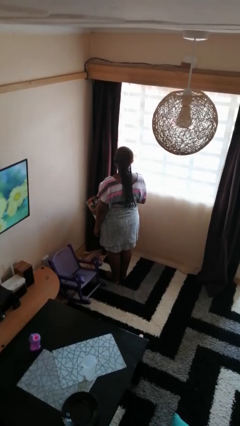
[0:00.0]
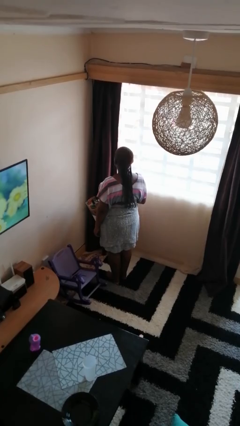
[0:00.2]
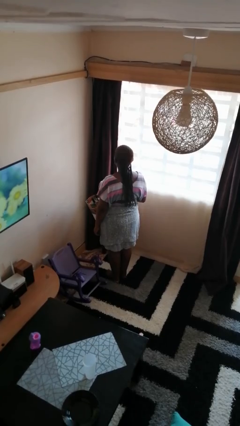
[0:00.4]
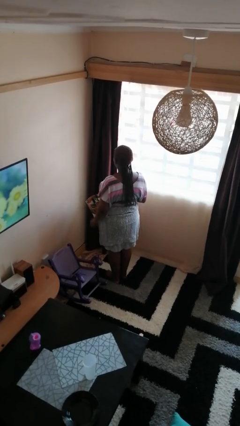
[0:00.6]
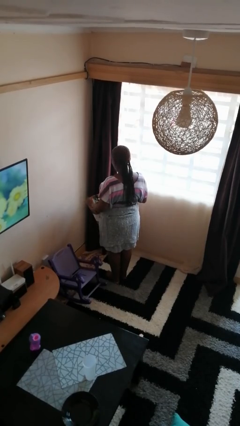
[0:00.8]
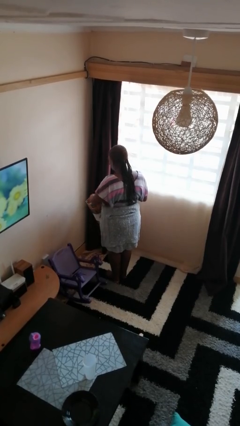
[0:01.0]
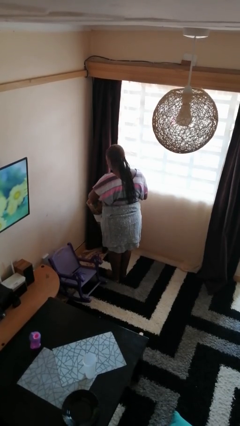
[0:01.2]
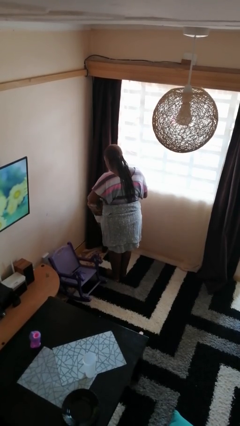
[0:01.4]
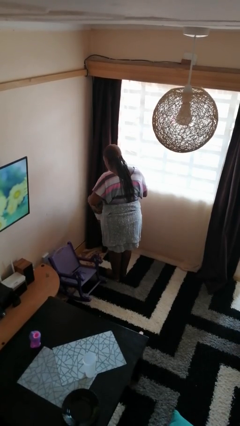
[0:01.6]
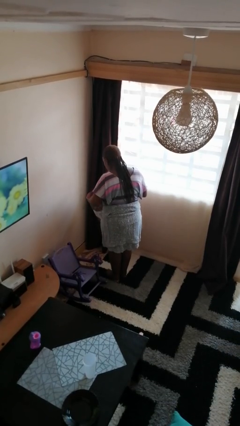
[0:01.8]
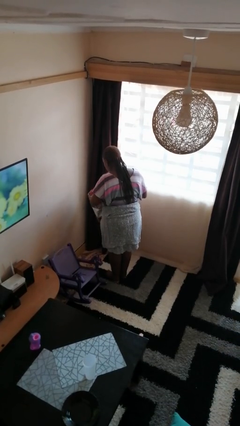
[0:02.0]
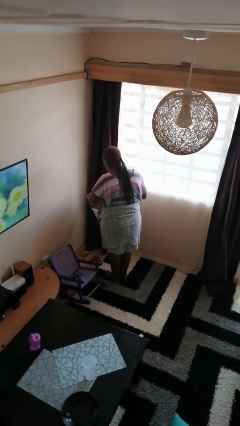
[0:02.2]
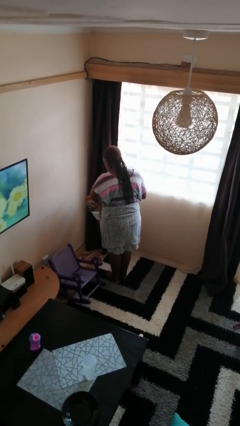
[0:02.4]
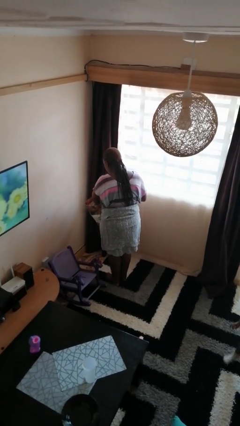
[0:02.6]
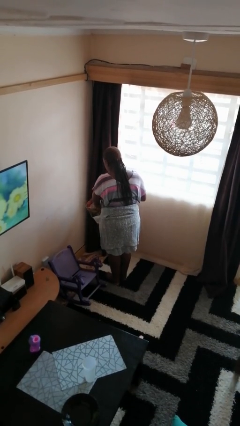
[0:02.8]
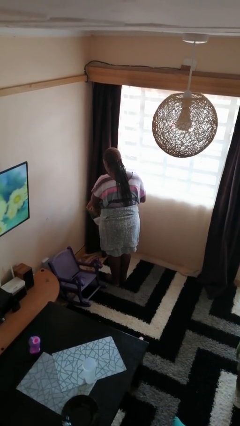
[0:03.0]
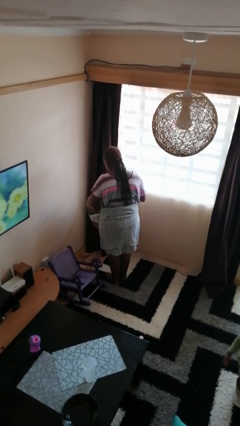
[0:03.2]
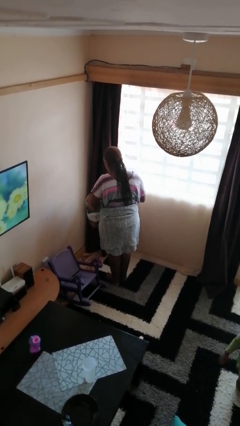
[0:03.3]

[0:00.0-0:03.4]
person takes object from bag

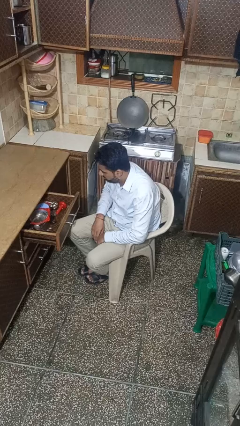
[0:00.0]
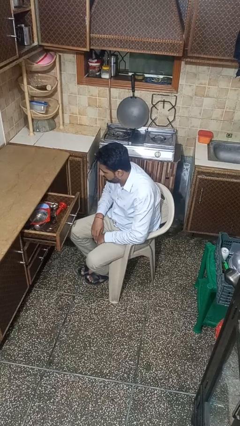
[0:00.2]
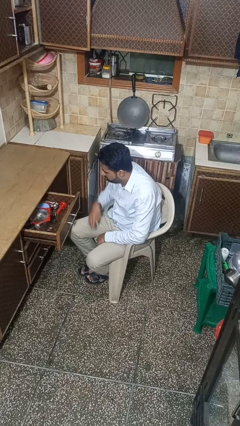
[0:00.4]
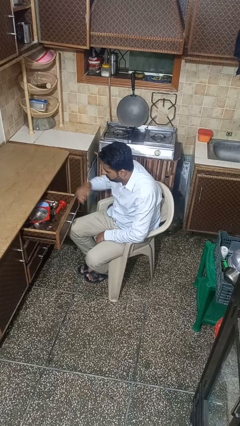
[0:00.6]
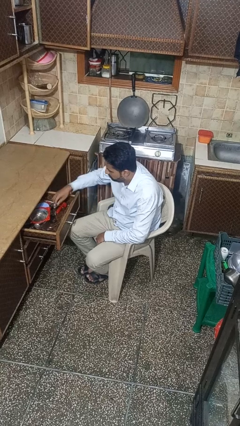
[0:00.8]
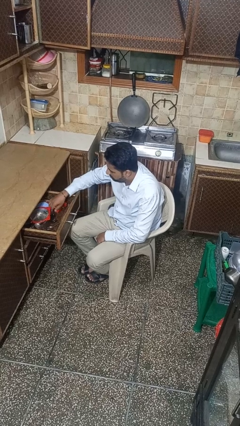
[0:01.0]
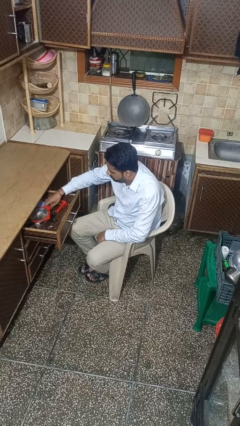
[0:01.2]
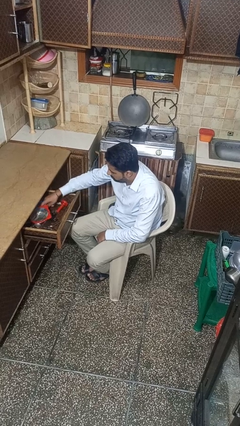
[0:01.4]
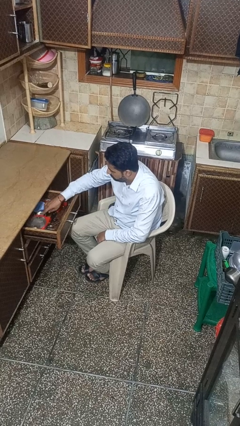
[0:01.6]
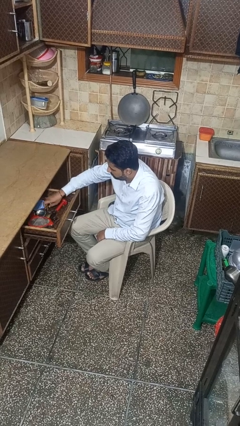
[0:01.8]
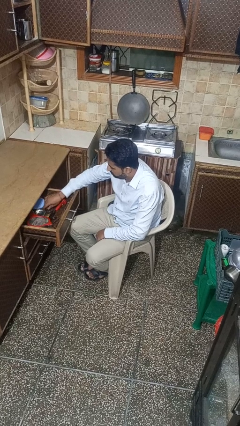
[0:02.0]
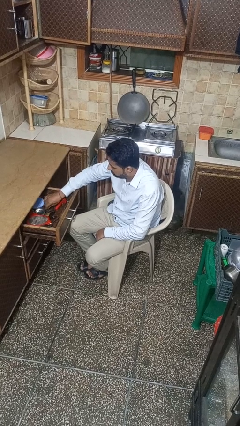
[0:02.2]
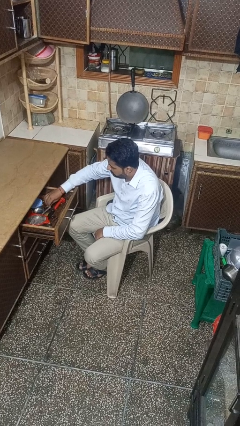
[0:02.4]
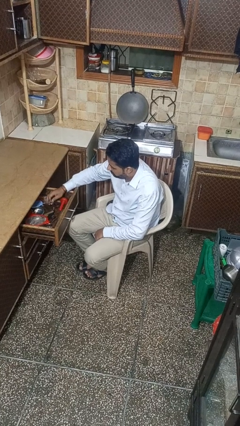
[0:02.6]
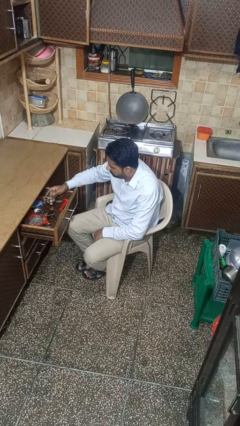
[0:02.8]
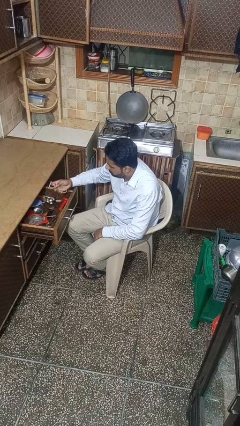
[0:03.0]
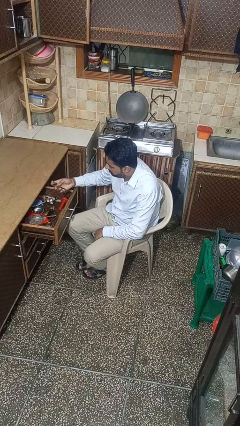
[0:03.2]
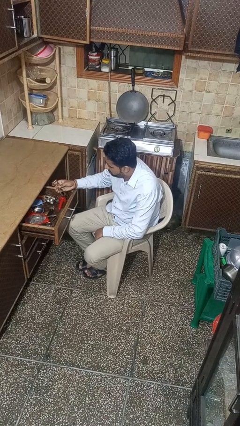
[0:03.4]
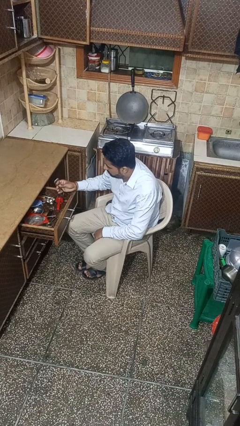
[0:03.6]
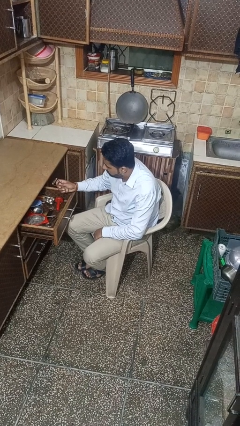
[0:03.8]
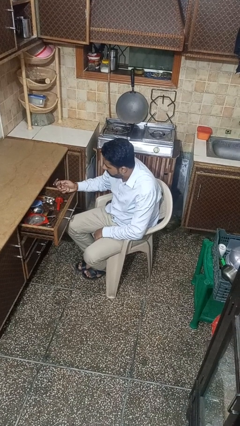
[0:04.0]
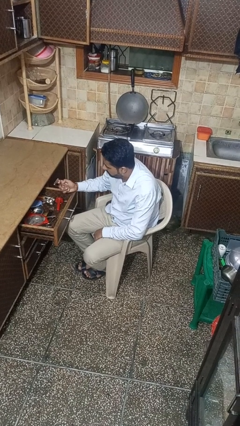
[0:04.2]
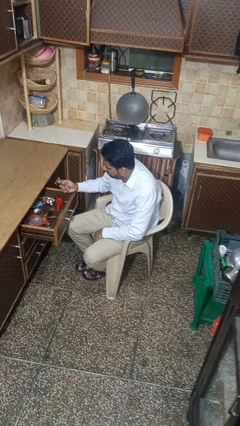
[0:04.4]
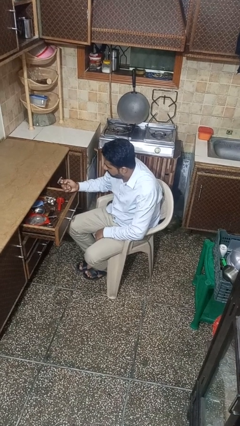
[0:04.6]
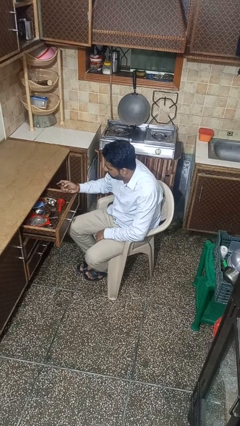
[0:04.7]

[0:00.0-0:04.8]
person takes object from kitchen drawer

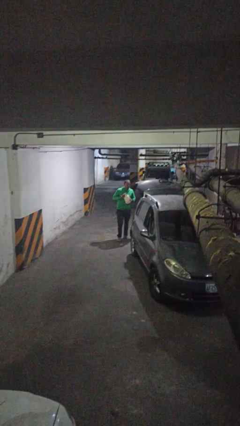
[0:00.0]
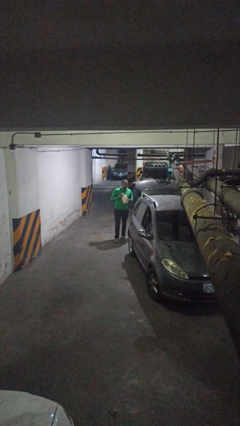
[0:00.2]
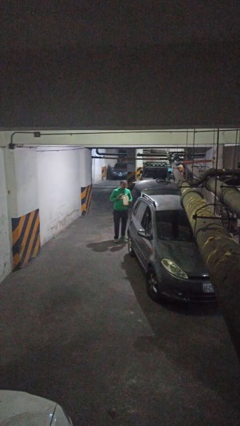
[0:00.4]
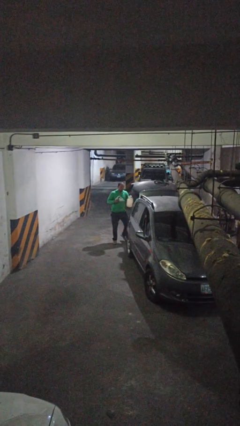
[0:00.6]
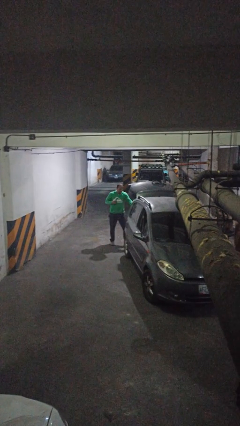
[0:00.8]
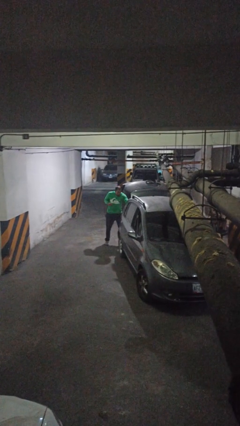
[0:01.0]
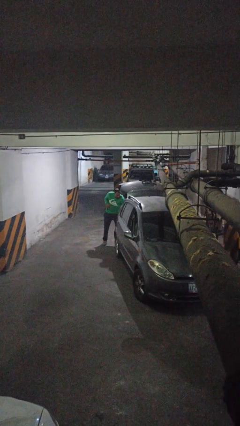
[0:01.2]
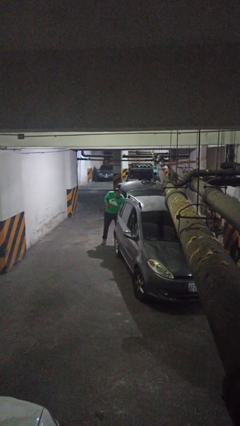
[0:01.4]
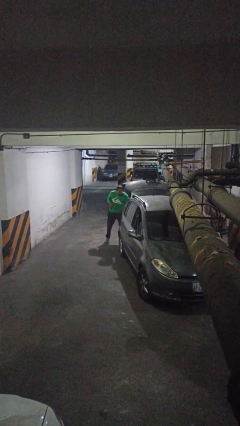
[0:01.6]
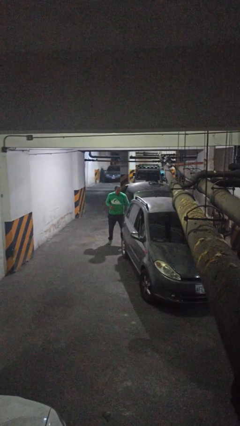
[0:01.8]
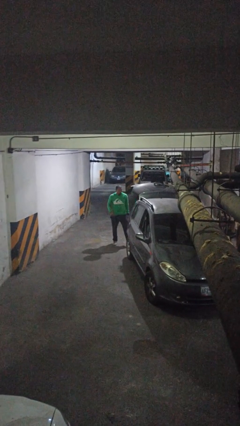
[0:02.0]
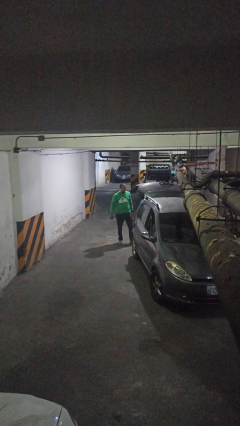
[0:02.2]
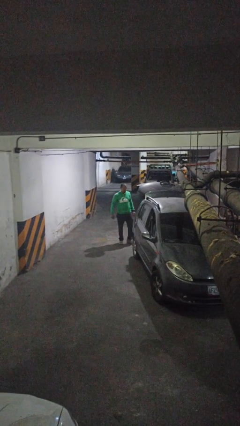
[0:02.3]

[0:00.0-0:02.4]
person loads car

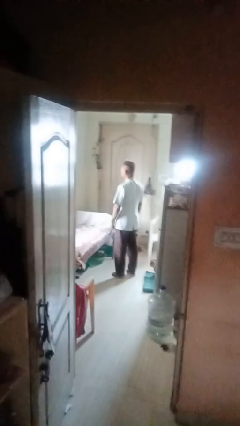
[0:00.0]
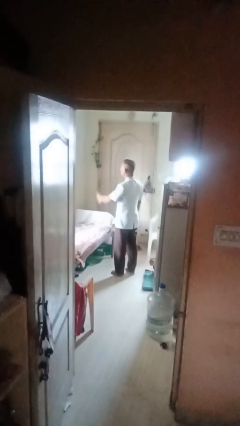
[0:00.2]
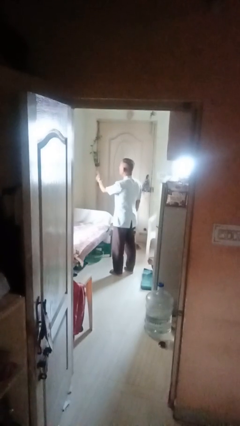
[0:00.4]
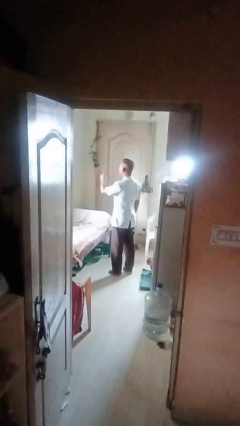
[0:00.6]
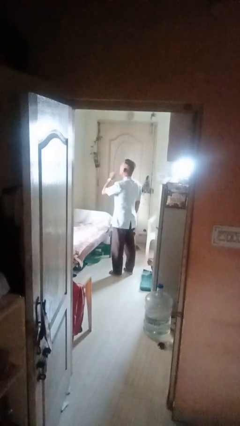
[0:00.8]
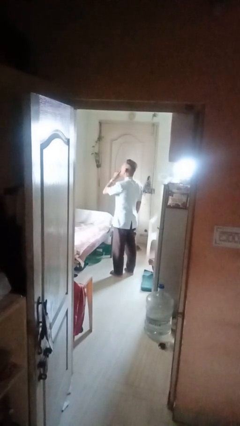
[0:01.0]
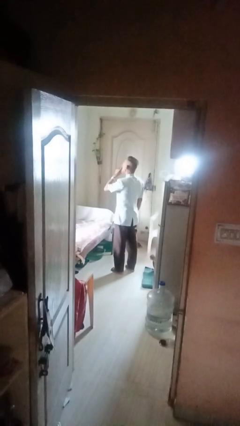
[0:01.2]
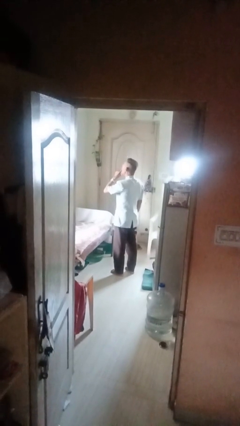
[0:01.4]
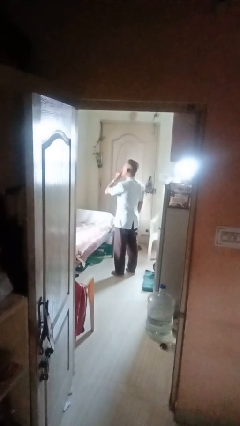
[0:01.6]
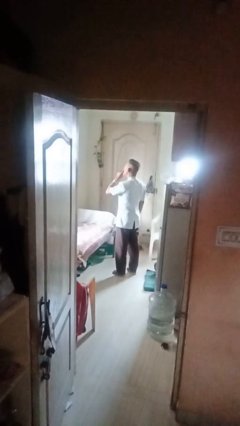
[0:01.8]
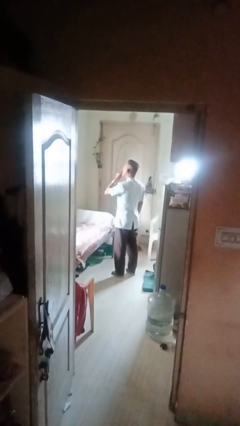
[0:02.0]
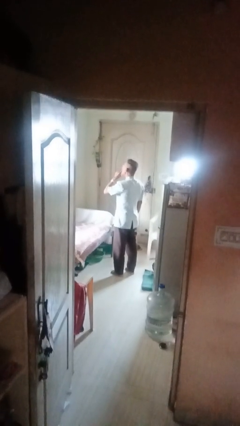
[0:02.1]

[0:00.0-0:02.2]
person gestures be quiet

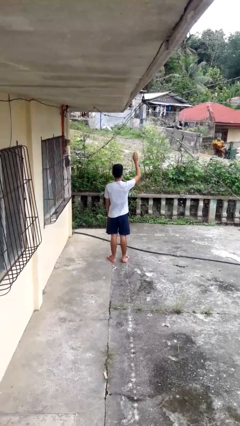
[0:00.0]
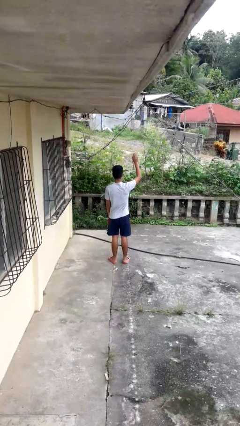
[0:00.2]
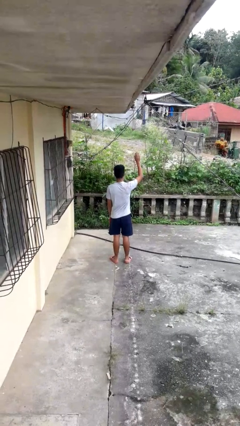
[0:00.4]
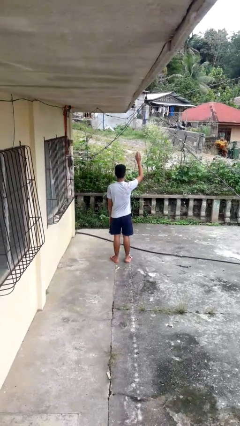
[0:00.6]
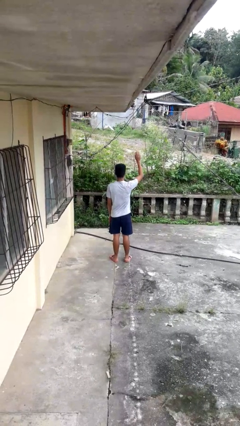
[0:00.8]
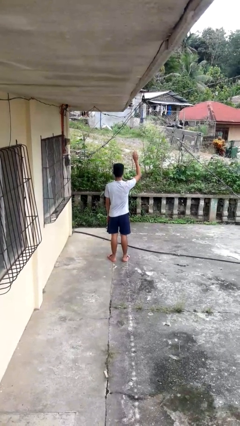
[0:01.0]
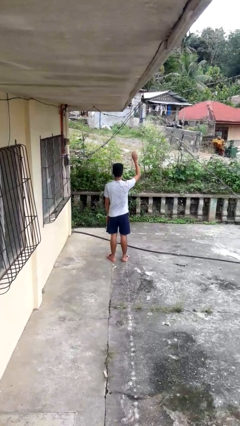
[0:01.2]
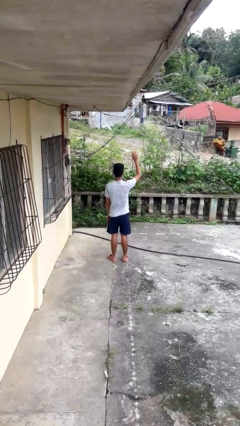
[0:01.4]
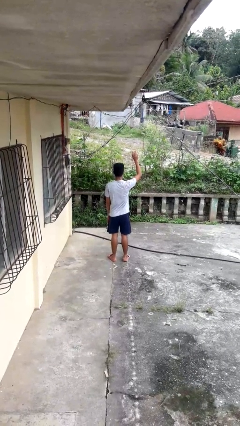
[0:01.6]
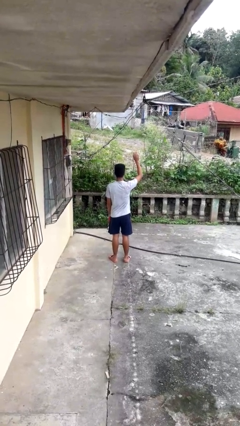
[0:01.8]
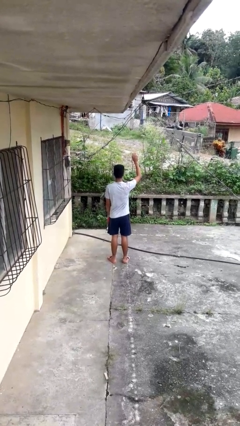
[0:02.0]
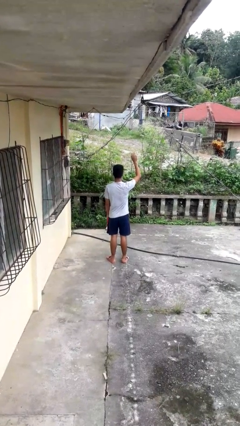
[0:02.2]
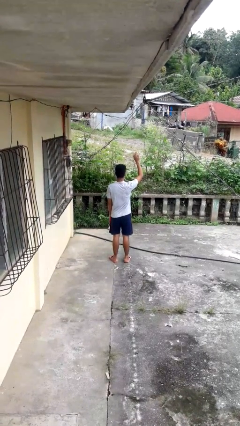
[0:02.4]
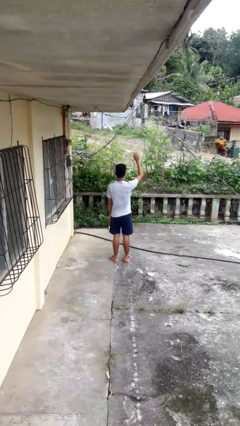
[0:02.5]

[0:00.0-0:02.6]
person gestures raise hand

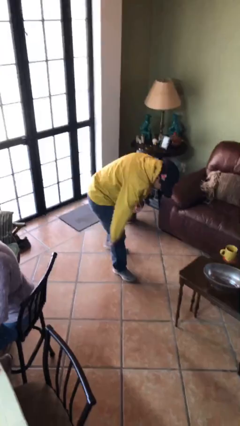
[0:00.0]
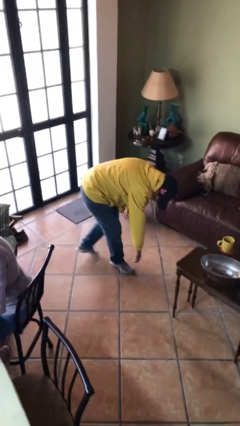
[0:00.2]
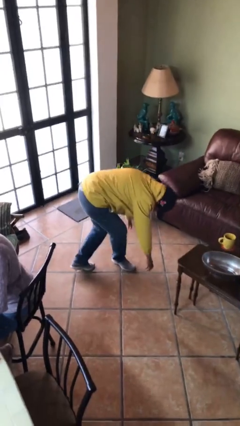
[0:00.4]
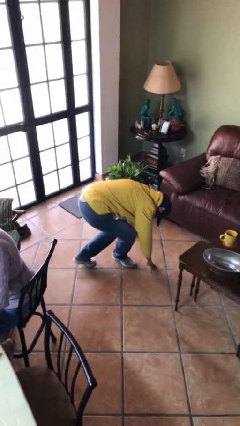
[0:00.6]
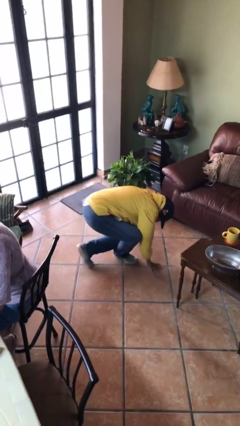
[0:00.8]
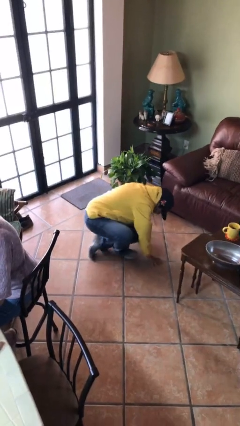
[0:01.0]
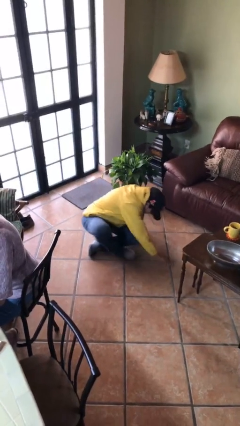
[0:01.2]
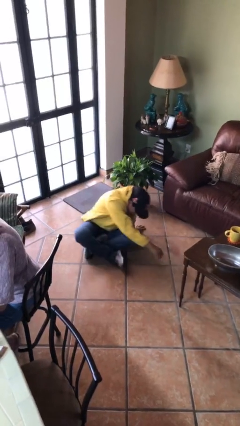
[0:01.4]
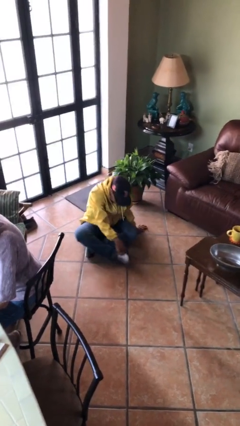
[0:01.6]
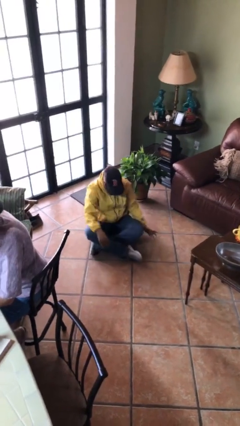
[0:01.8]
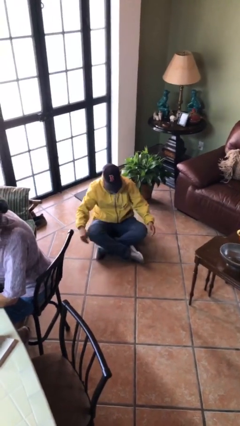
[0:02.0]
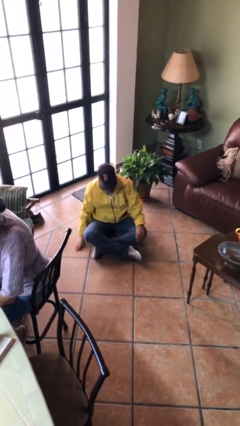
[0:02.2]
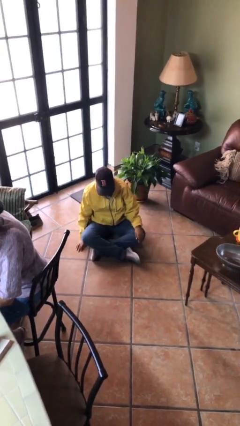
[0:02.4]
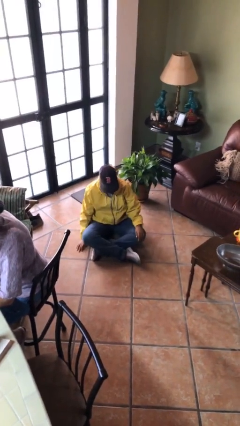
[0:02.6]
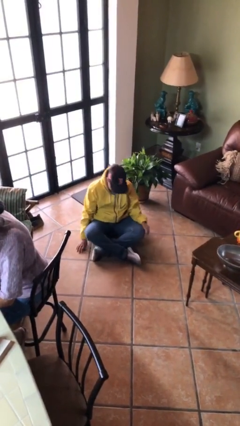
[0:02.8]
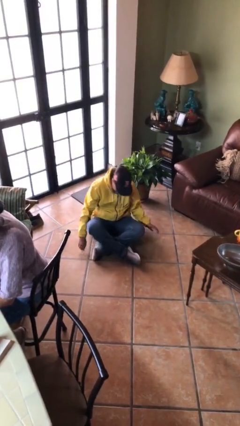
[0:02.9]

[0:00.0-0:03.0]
person sits crisscross
